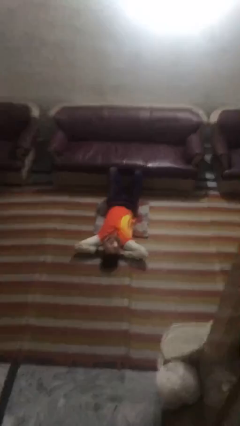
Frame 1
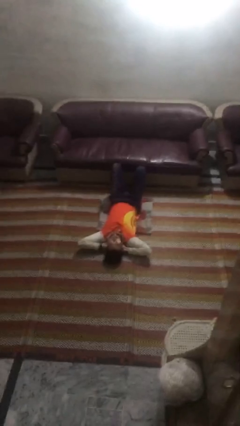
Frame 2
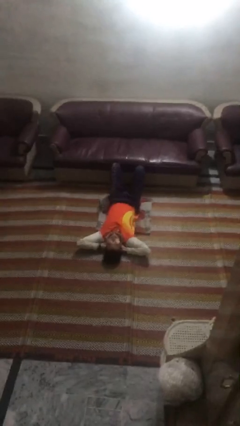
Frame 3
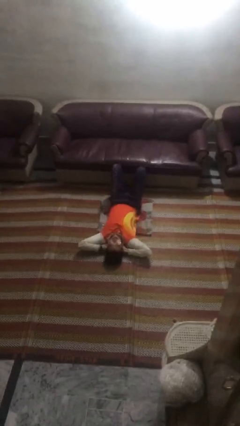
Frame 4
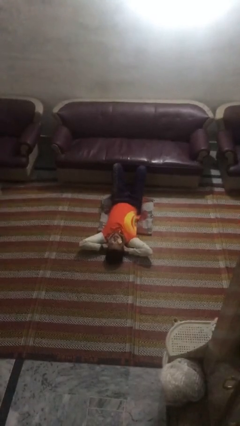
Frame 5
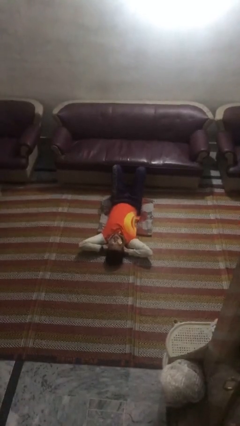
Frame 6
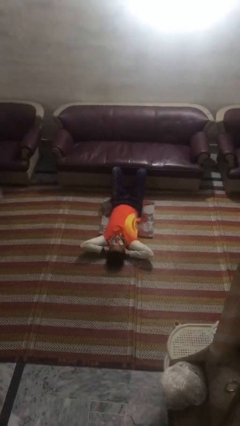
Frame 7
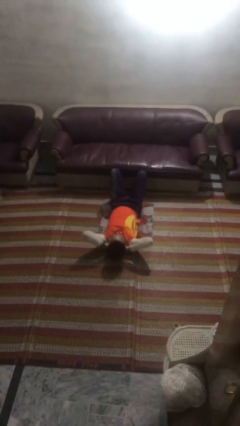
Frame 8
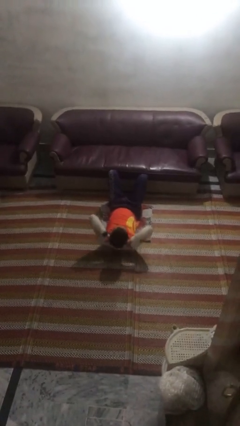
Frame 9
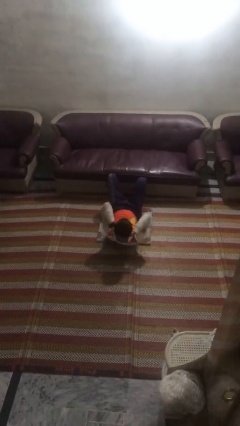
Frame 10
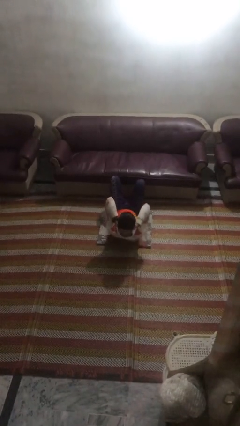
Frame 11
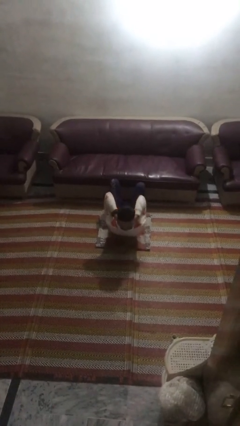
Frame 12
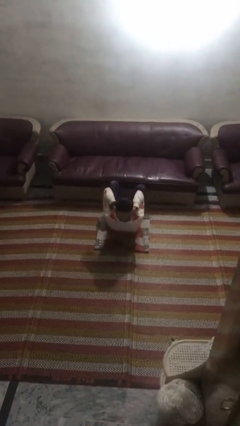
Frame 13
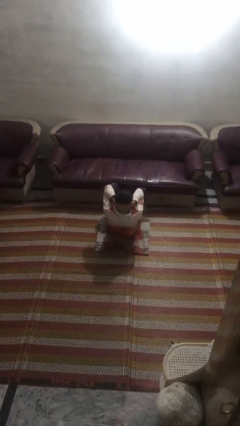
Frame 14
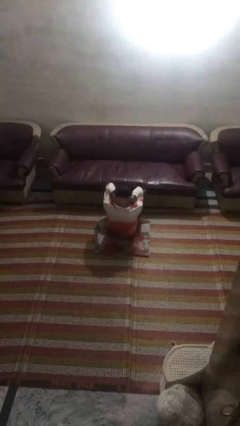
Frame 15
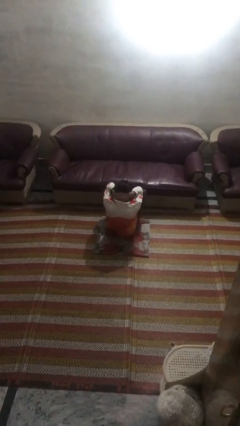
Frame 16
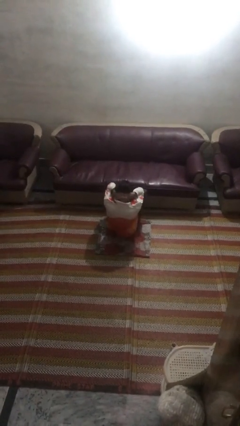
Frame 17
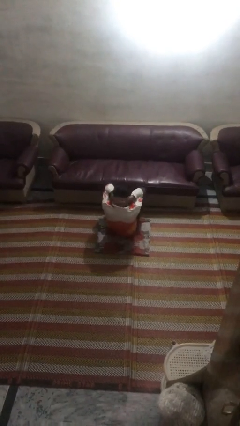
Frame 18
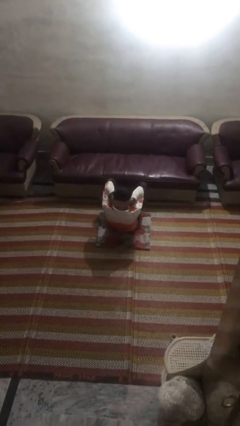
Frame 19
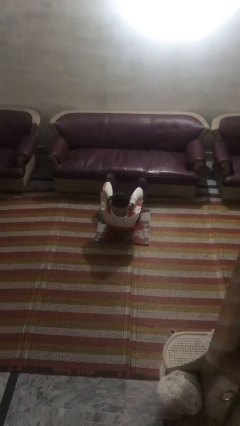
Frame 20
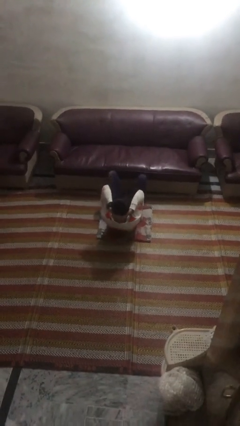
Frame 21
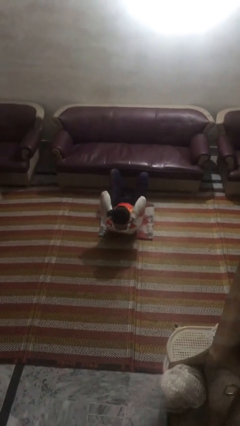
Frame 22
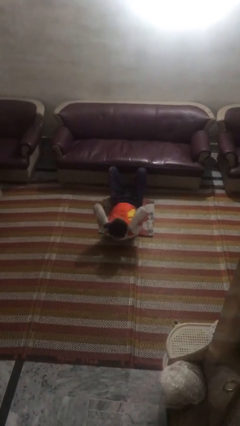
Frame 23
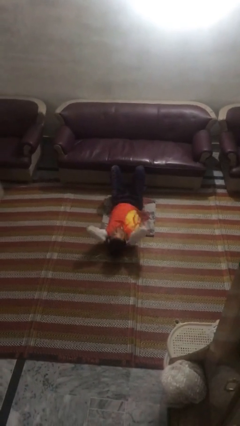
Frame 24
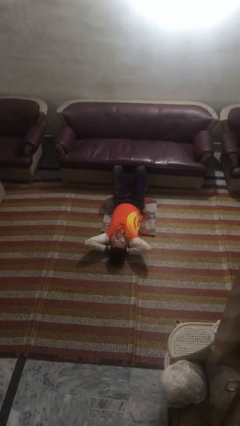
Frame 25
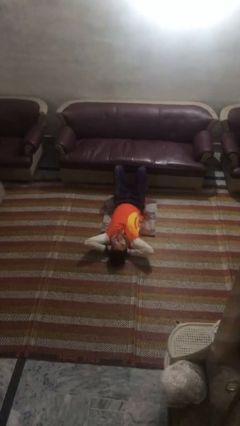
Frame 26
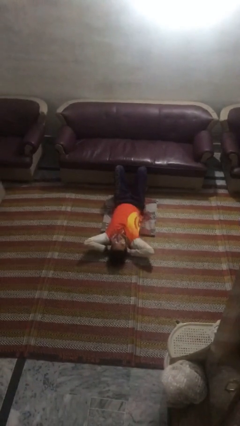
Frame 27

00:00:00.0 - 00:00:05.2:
person exercises with situp

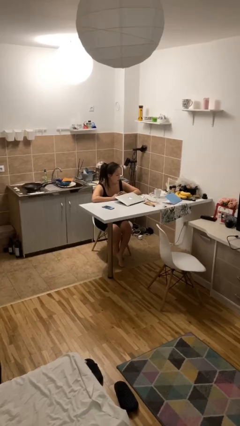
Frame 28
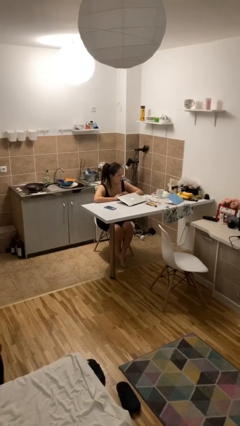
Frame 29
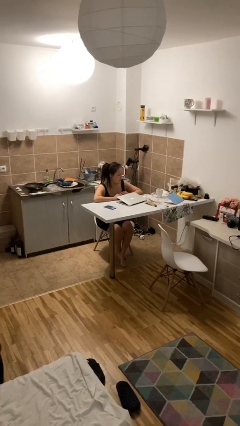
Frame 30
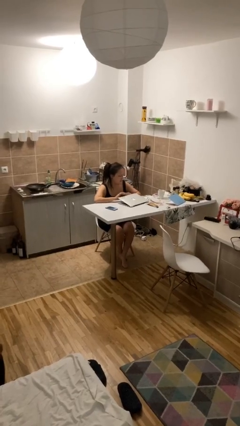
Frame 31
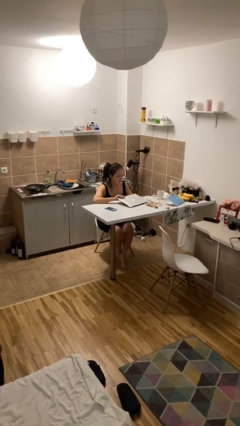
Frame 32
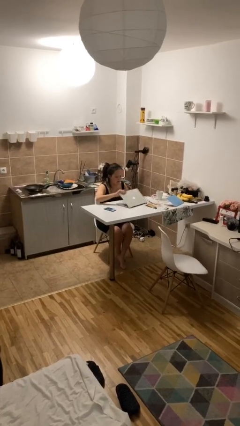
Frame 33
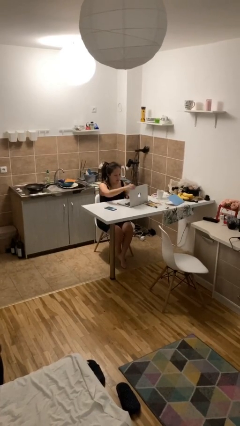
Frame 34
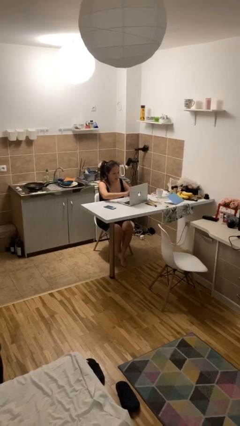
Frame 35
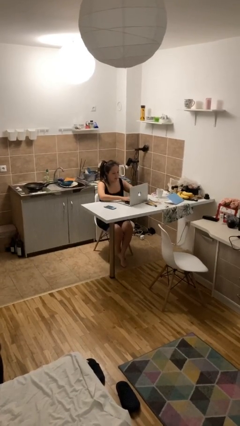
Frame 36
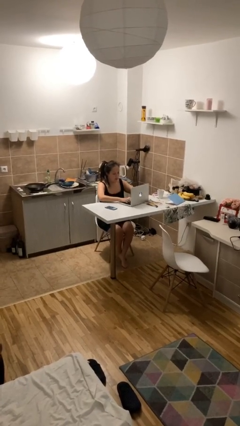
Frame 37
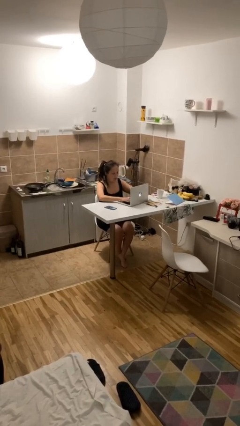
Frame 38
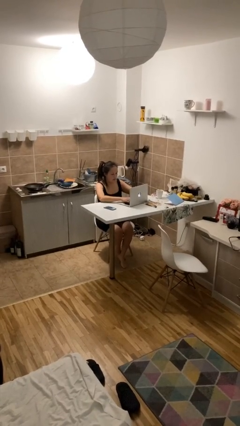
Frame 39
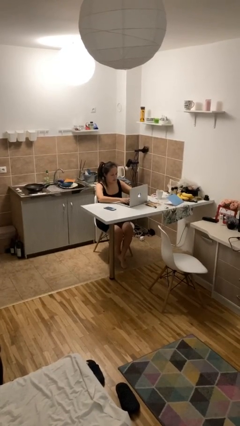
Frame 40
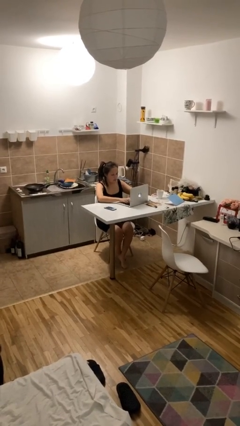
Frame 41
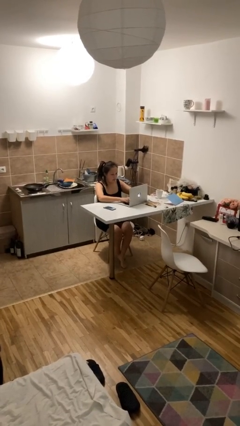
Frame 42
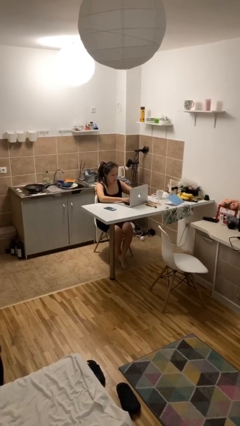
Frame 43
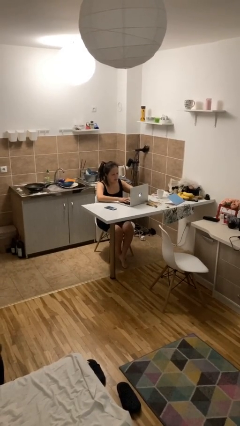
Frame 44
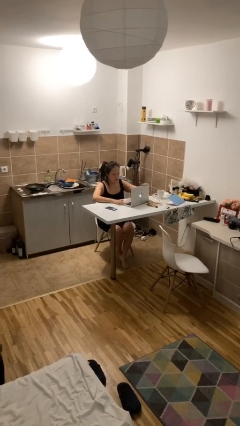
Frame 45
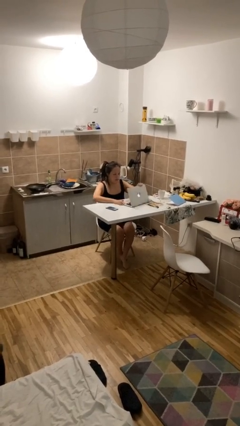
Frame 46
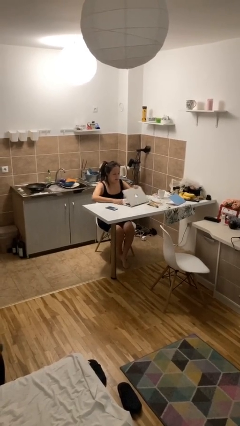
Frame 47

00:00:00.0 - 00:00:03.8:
person interacts with laptop

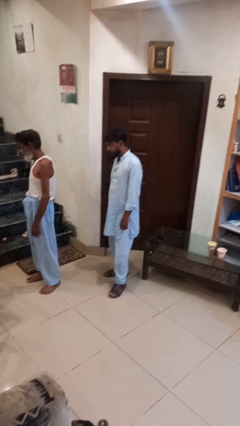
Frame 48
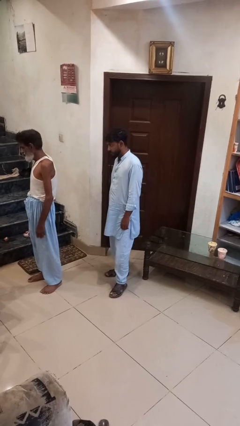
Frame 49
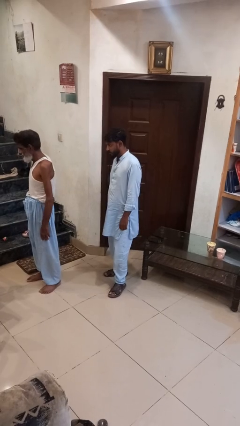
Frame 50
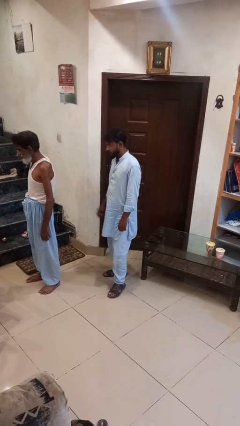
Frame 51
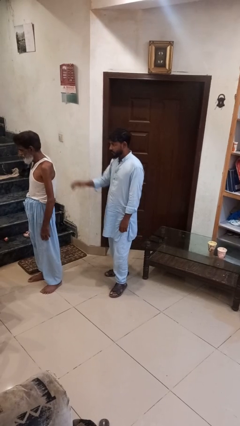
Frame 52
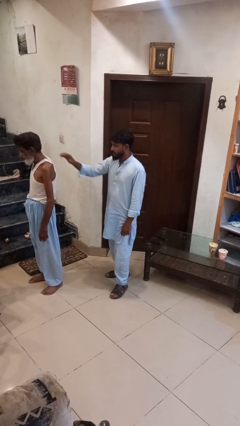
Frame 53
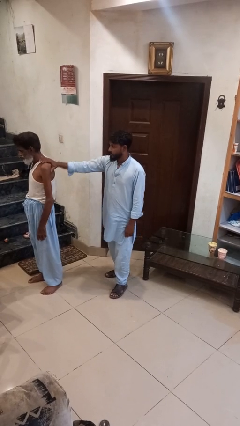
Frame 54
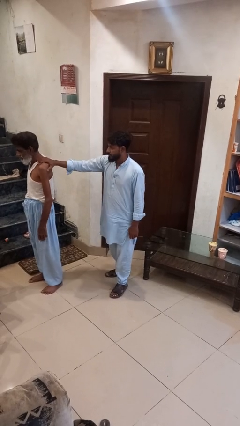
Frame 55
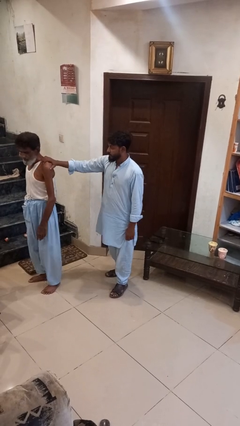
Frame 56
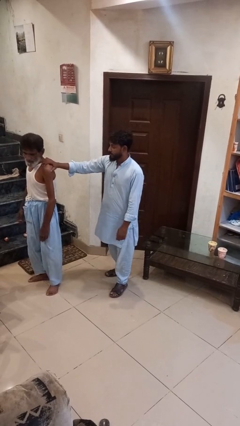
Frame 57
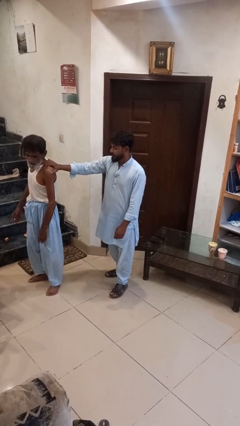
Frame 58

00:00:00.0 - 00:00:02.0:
person grabs person by shoulder

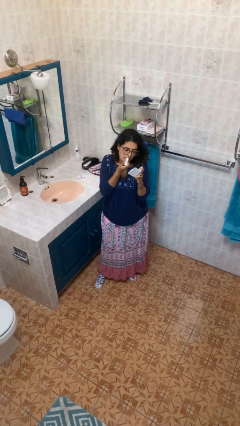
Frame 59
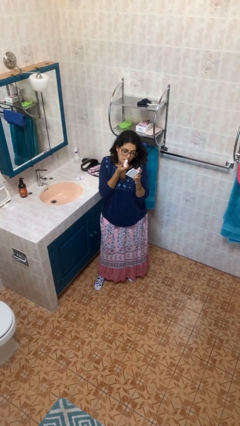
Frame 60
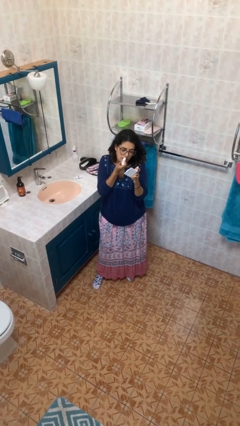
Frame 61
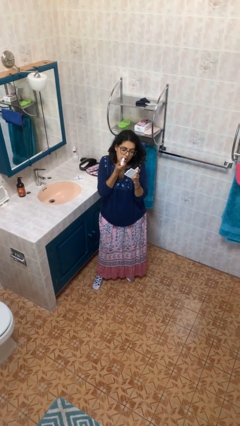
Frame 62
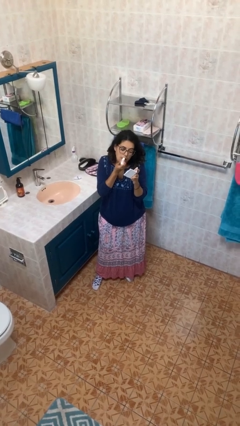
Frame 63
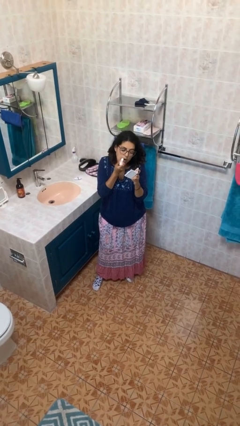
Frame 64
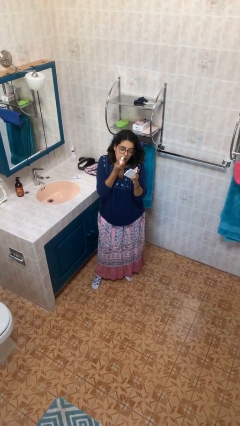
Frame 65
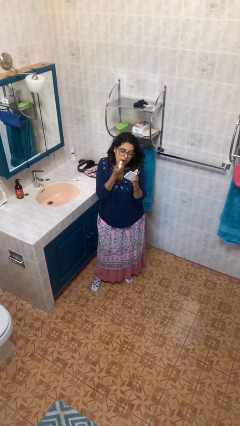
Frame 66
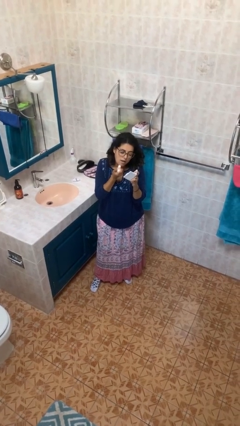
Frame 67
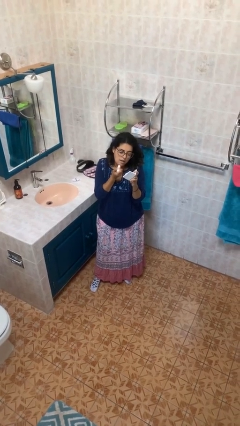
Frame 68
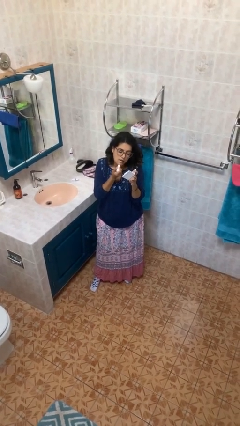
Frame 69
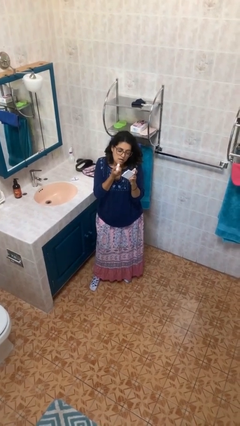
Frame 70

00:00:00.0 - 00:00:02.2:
person applies lip makeup

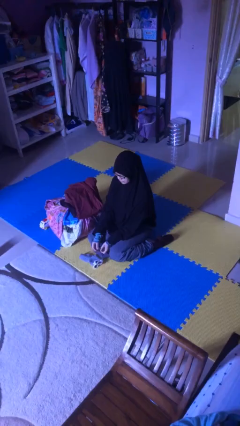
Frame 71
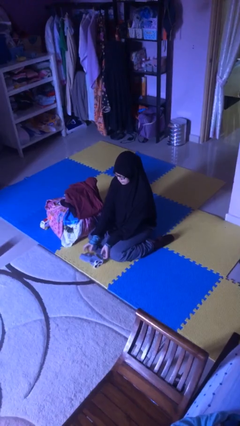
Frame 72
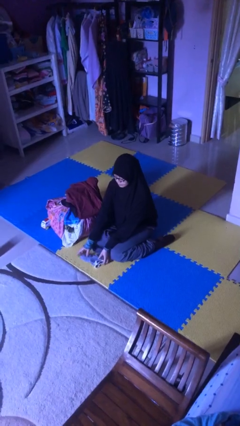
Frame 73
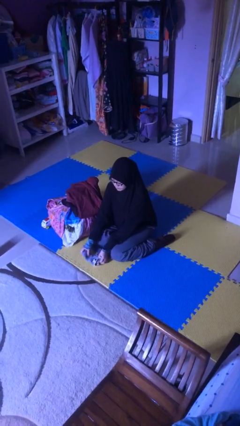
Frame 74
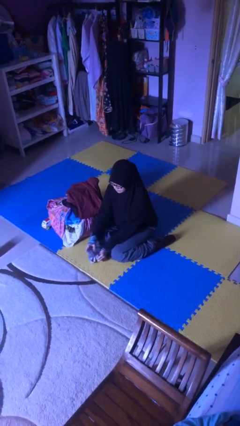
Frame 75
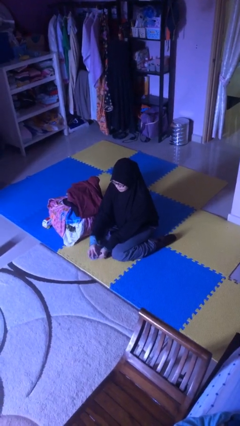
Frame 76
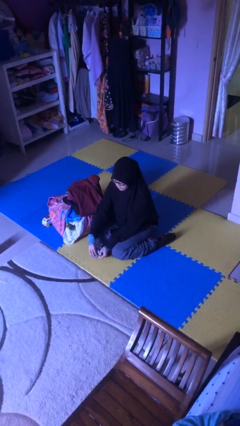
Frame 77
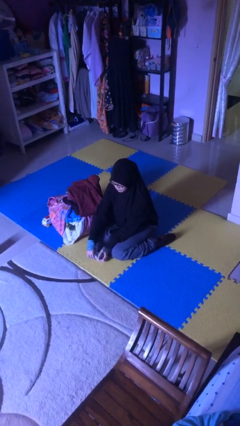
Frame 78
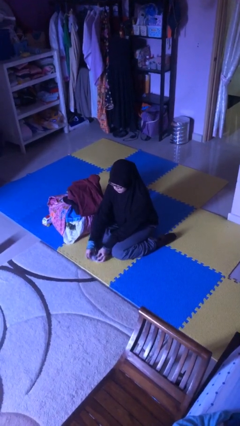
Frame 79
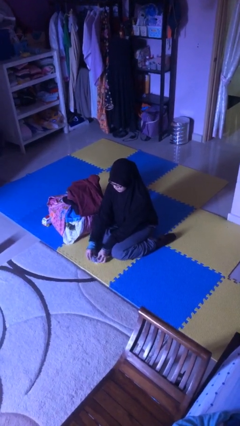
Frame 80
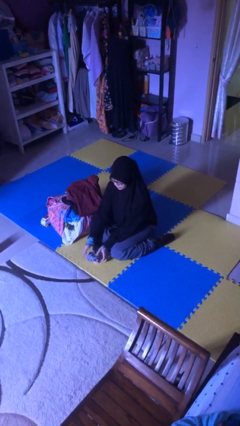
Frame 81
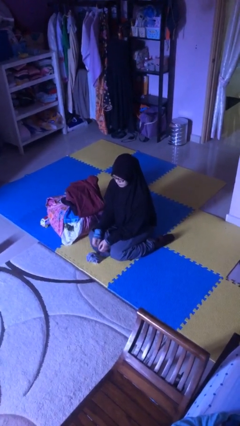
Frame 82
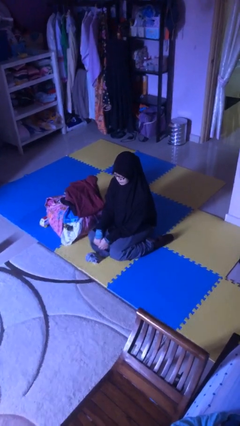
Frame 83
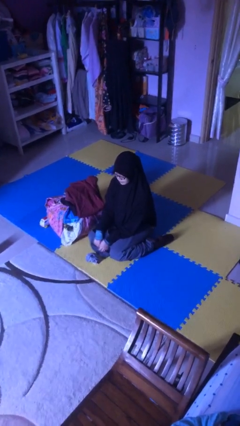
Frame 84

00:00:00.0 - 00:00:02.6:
person folds socks

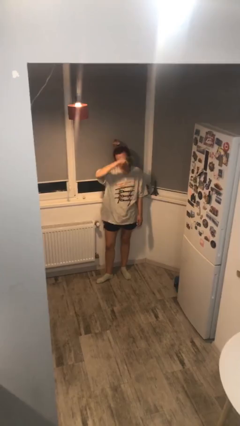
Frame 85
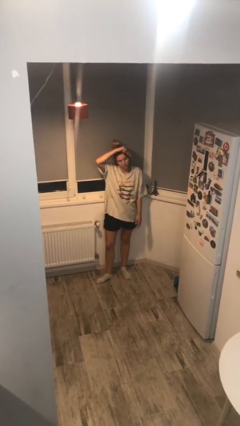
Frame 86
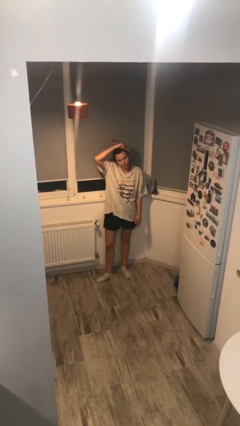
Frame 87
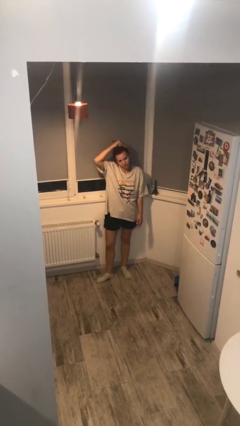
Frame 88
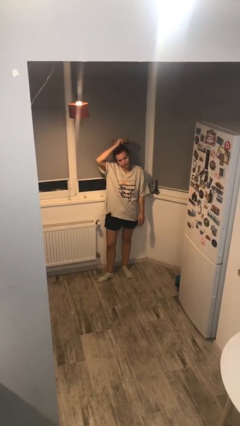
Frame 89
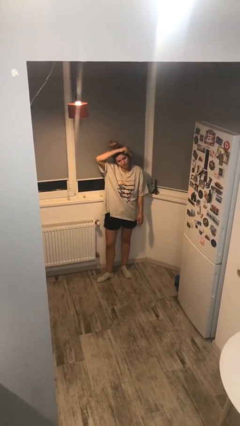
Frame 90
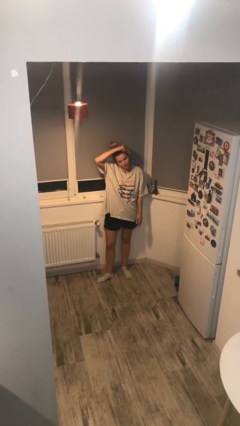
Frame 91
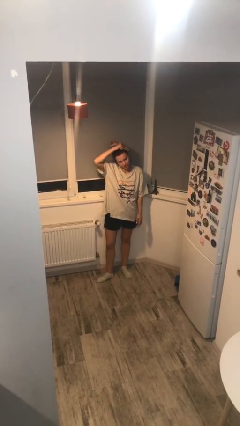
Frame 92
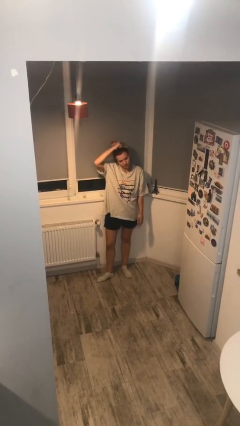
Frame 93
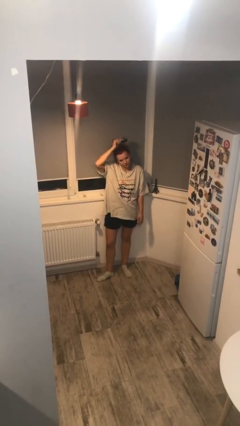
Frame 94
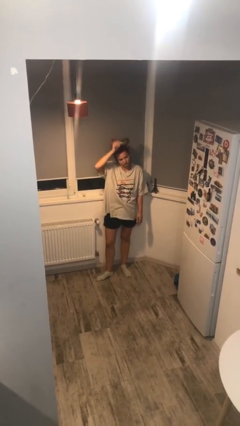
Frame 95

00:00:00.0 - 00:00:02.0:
person brushes hair
